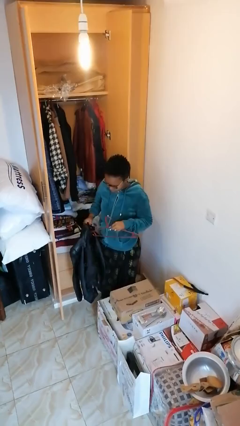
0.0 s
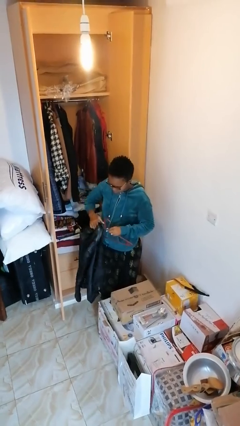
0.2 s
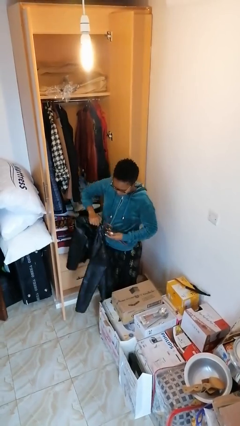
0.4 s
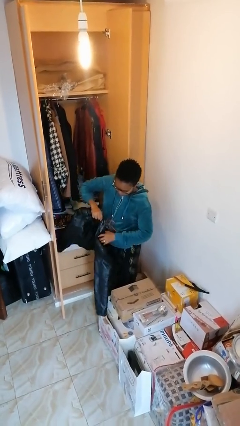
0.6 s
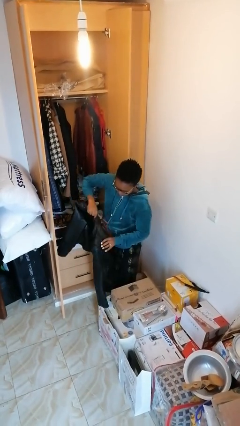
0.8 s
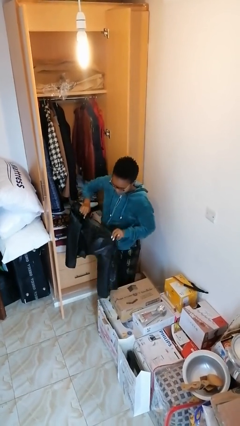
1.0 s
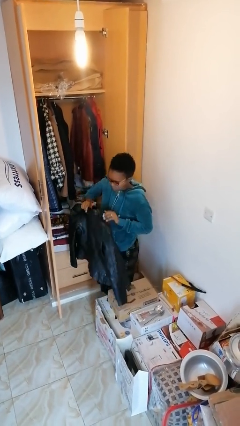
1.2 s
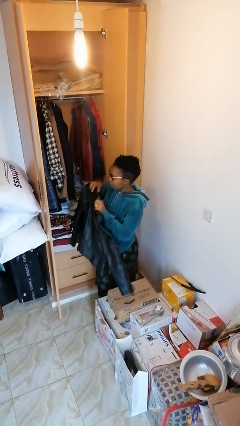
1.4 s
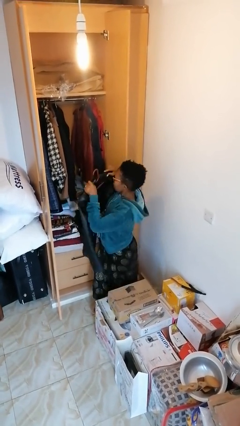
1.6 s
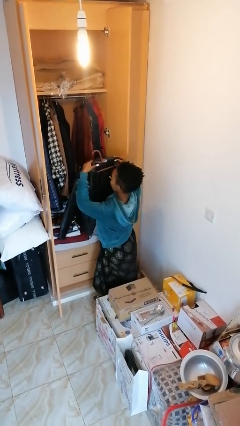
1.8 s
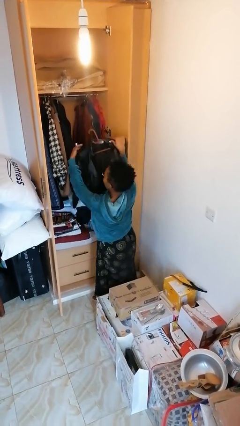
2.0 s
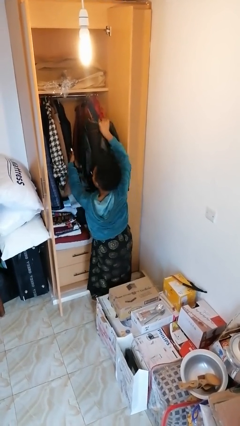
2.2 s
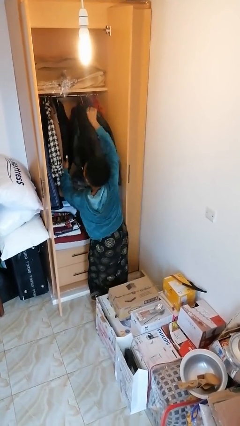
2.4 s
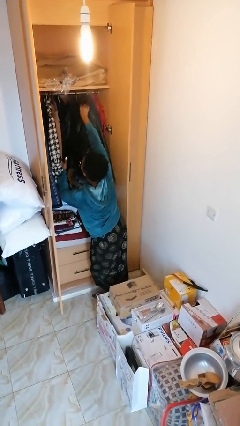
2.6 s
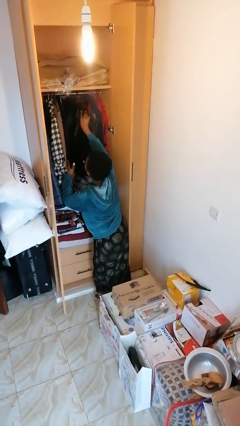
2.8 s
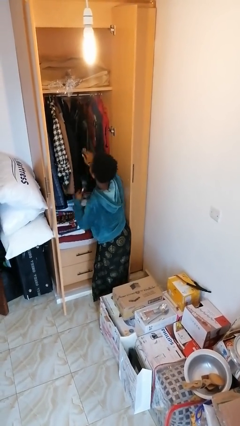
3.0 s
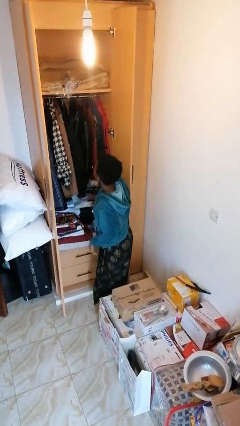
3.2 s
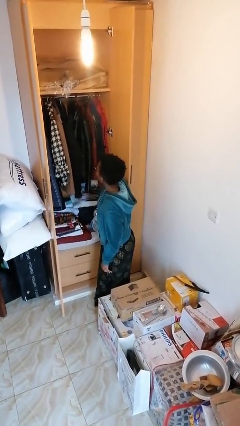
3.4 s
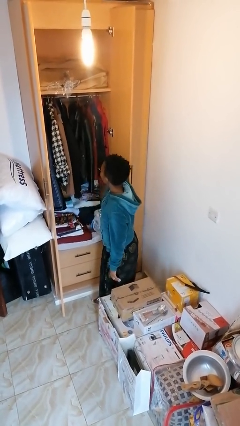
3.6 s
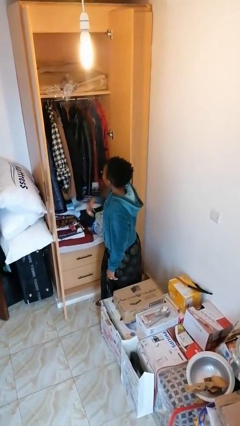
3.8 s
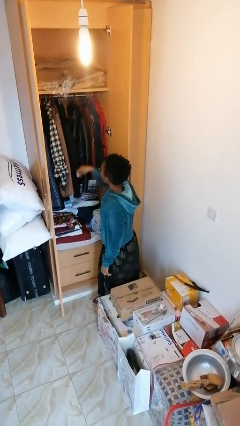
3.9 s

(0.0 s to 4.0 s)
person puts clothes into closet

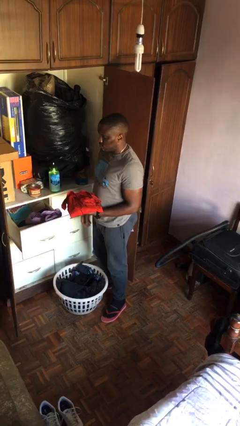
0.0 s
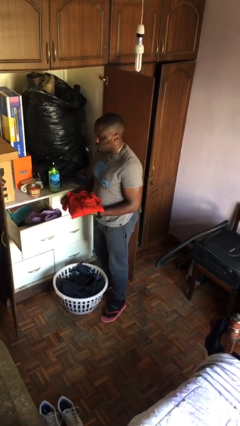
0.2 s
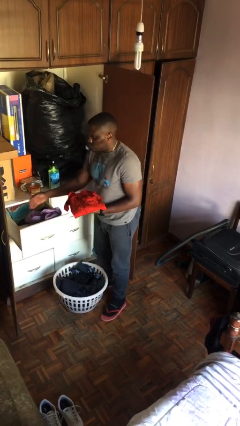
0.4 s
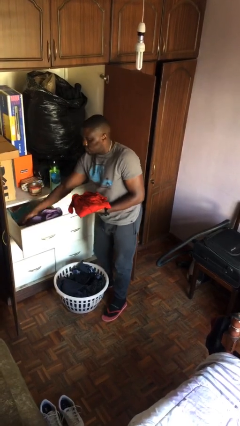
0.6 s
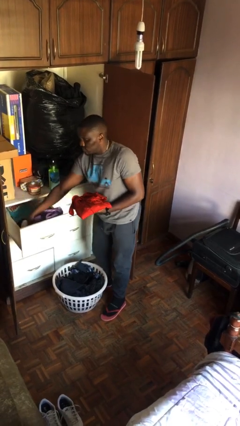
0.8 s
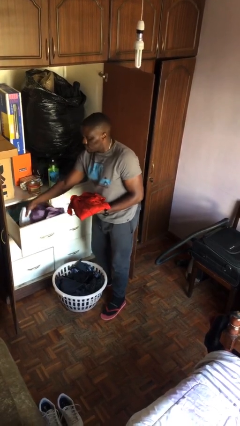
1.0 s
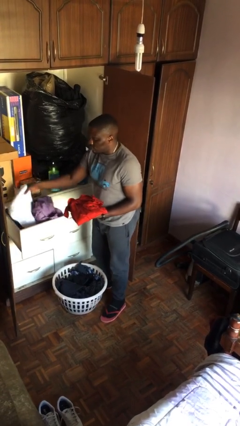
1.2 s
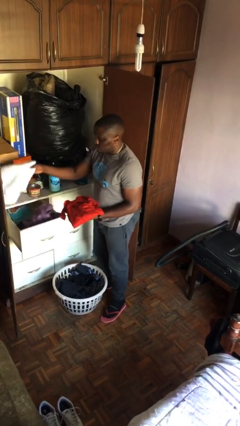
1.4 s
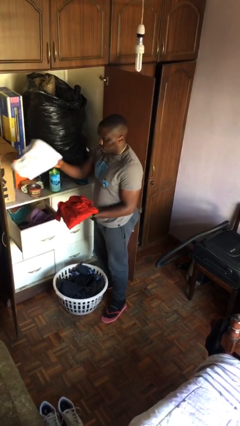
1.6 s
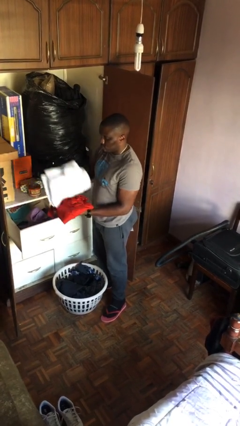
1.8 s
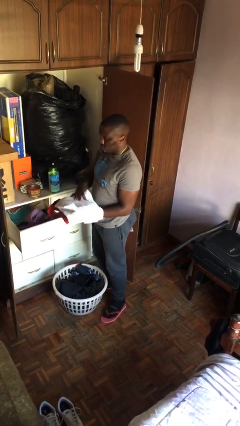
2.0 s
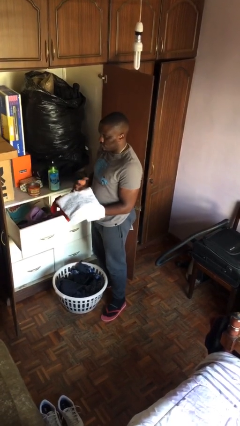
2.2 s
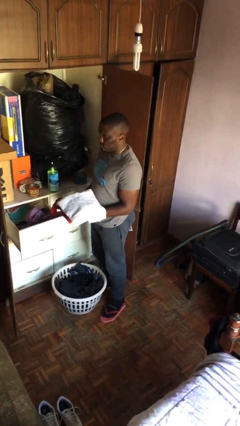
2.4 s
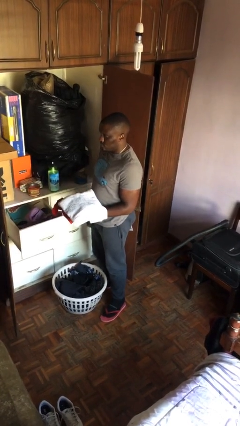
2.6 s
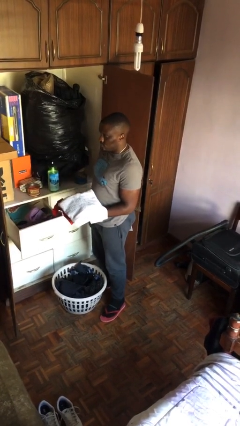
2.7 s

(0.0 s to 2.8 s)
person takes clothes from dresser

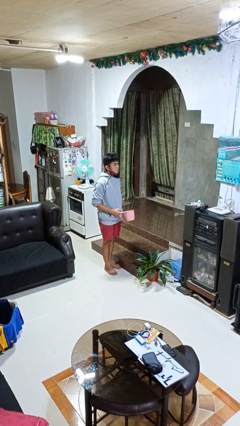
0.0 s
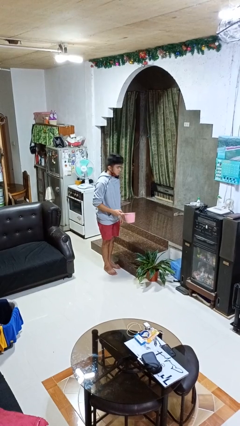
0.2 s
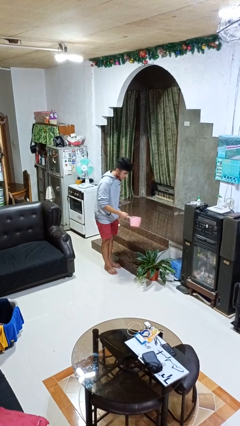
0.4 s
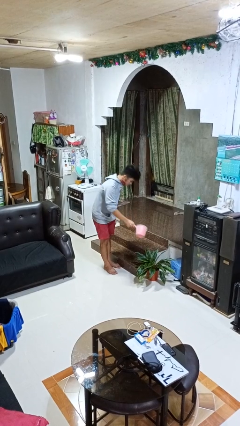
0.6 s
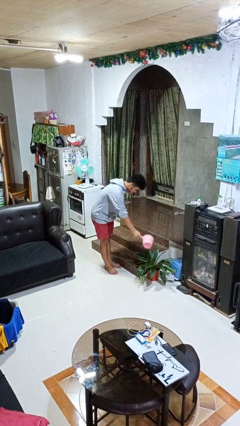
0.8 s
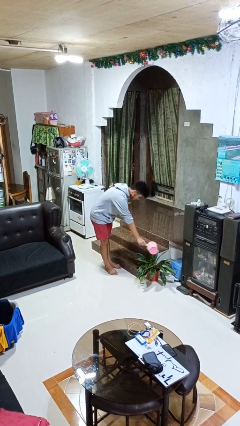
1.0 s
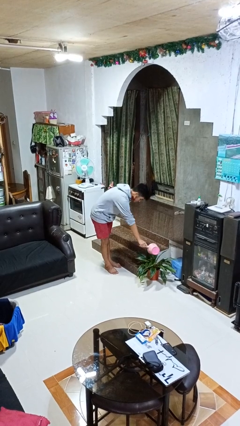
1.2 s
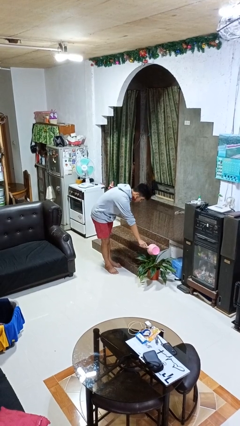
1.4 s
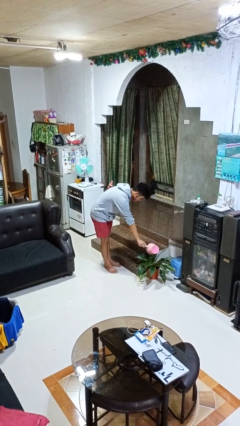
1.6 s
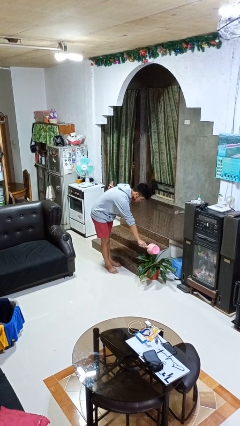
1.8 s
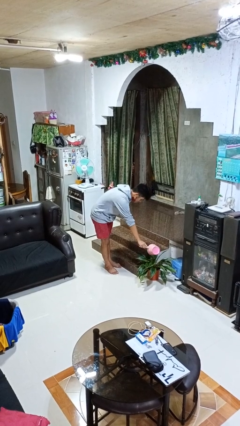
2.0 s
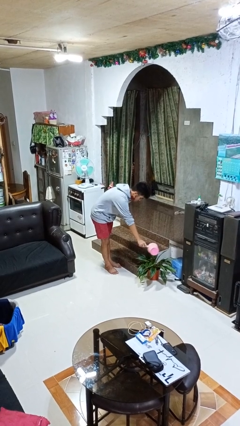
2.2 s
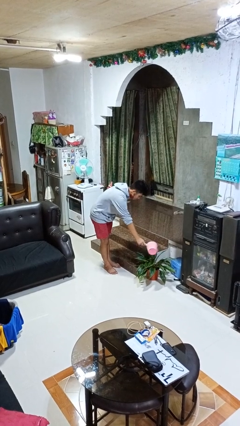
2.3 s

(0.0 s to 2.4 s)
person waters houseplant

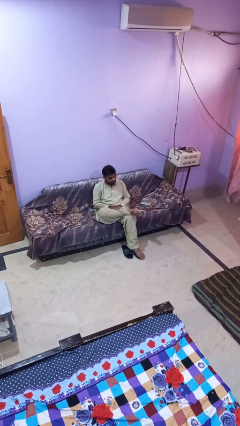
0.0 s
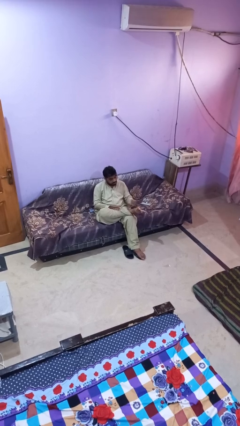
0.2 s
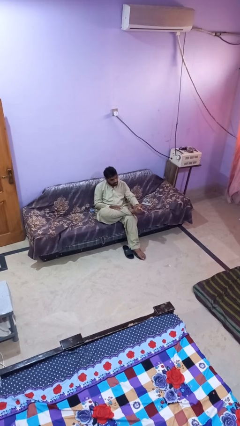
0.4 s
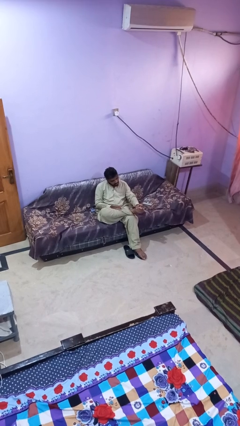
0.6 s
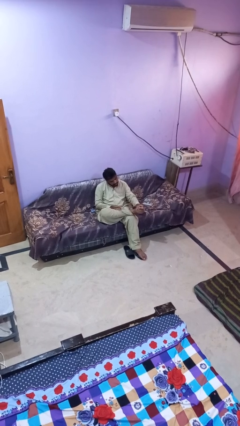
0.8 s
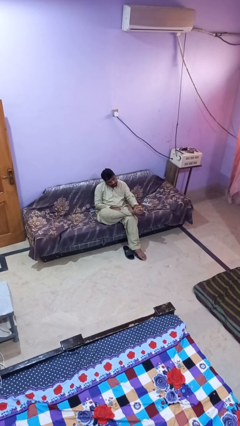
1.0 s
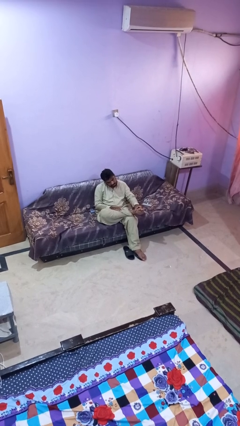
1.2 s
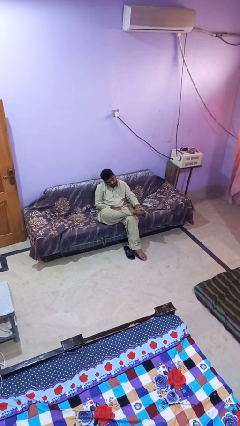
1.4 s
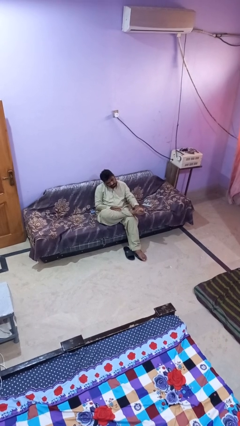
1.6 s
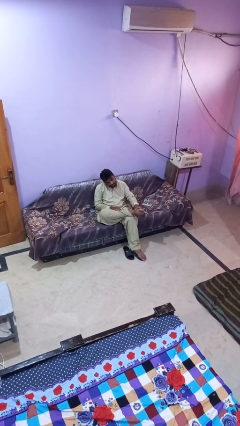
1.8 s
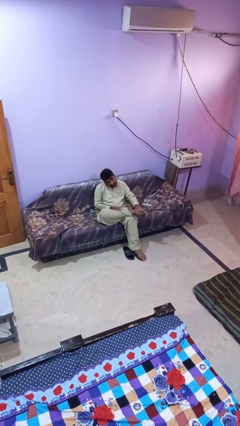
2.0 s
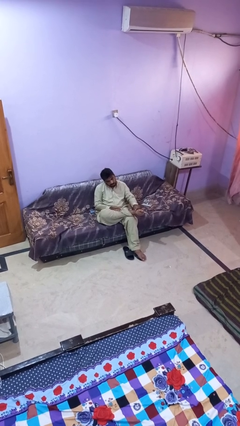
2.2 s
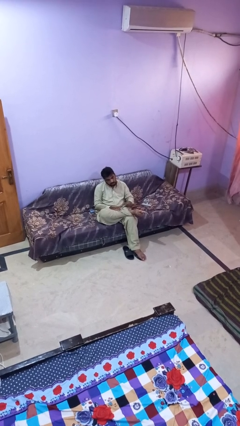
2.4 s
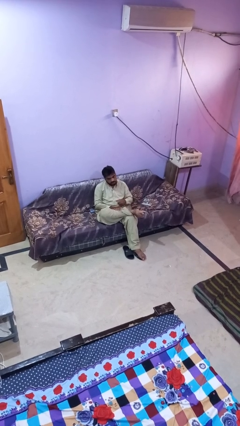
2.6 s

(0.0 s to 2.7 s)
person rubs foot

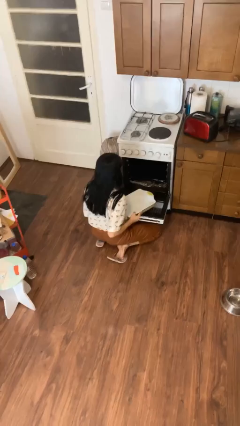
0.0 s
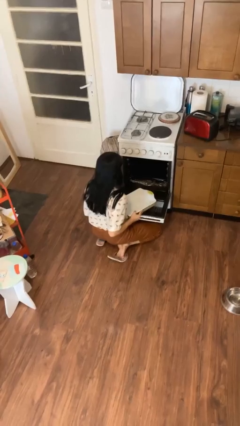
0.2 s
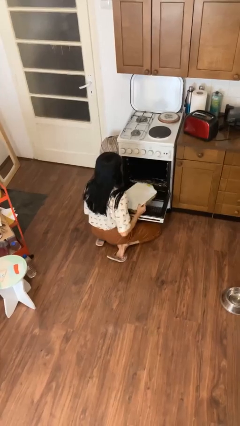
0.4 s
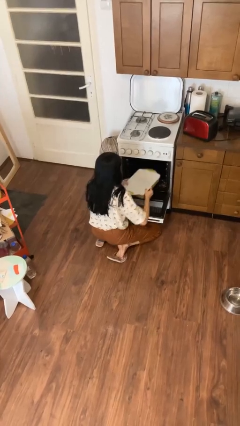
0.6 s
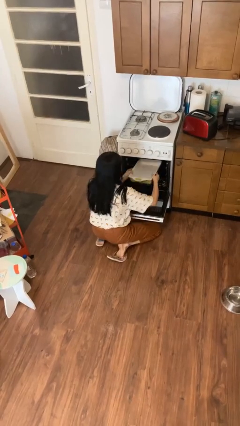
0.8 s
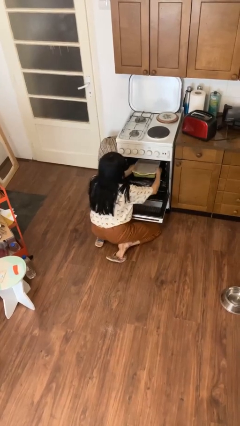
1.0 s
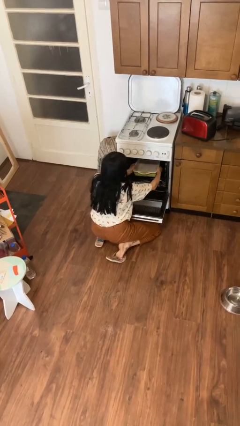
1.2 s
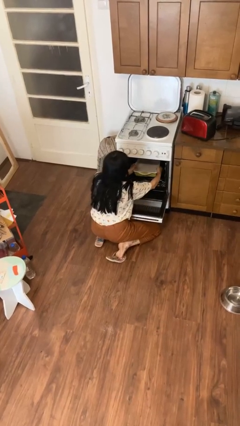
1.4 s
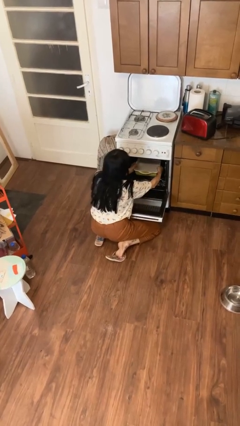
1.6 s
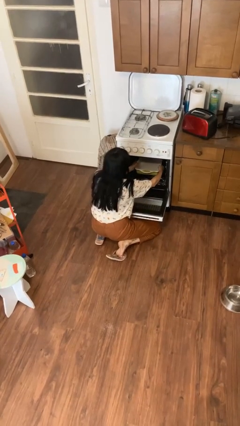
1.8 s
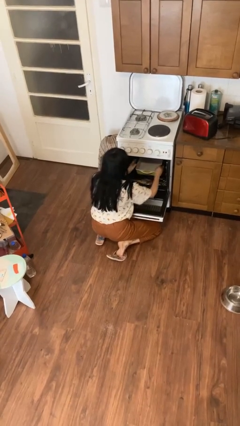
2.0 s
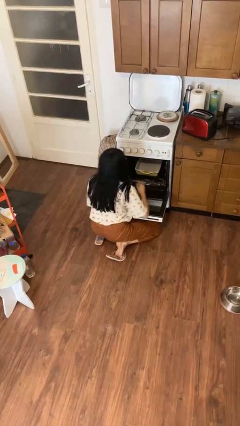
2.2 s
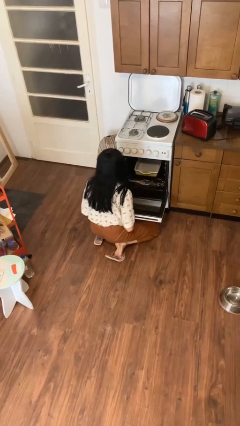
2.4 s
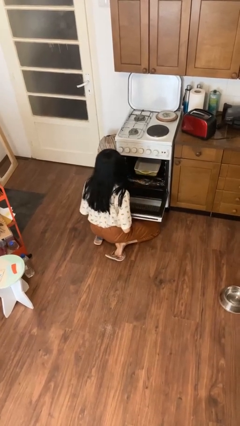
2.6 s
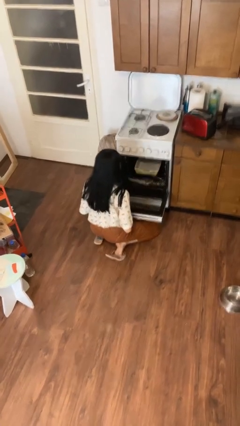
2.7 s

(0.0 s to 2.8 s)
person puts object into oven

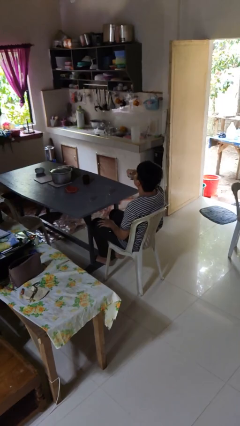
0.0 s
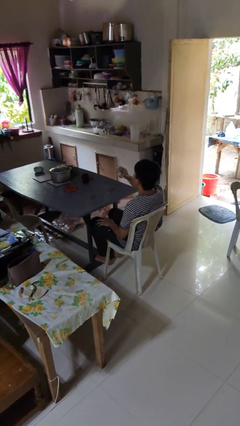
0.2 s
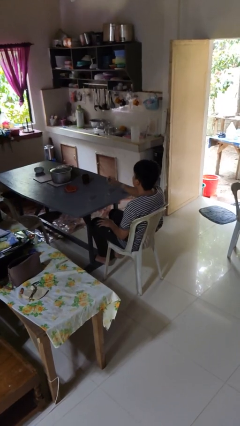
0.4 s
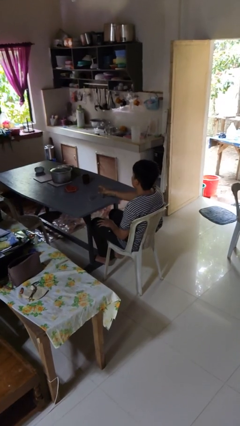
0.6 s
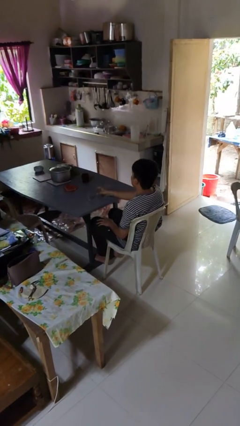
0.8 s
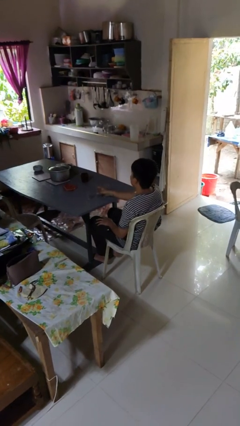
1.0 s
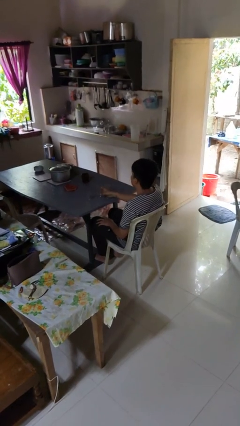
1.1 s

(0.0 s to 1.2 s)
person puts down object on table

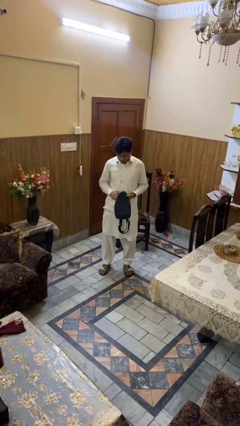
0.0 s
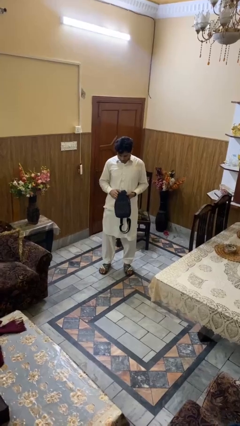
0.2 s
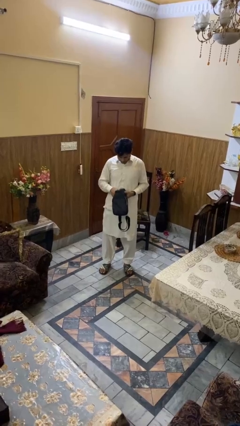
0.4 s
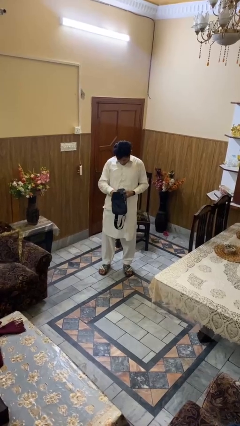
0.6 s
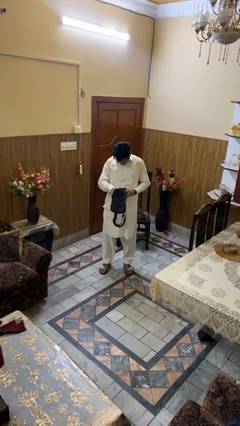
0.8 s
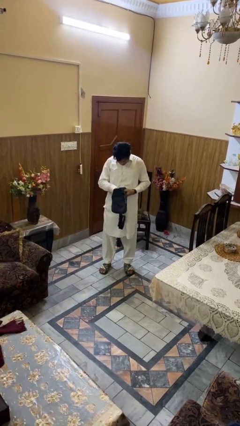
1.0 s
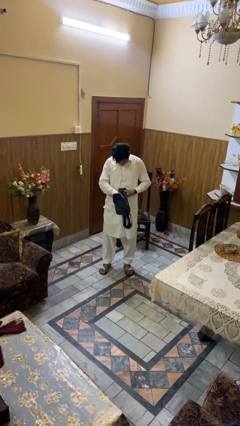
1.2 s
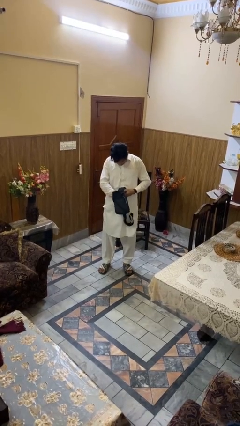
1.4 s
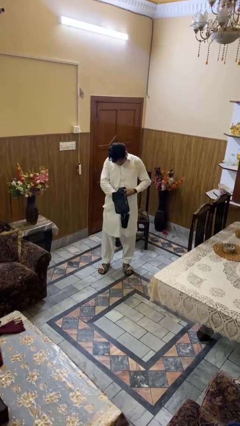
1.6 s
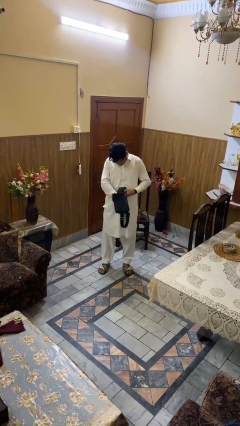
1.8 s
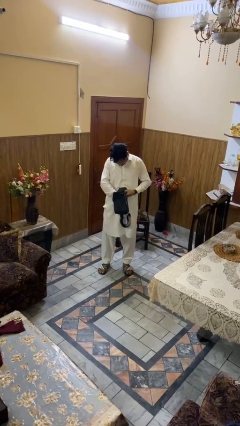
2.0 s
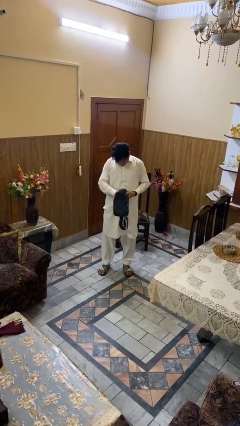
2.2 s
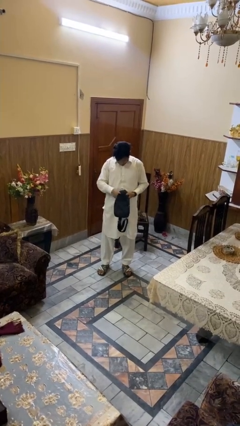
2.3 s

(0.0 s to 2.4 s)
person searches in purse
